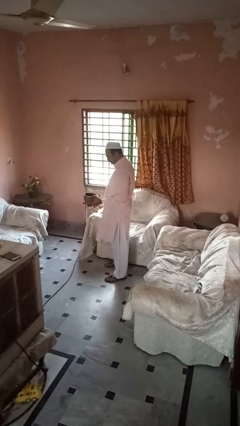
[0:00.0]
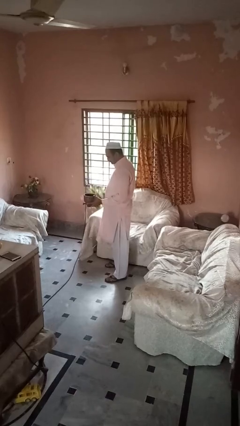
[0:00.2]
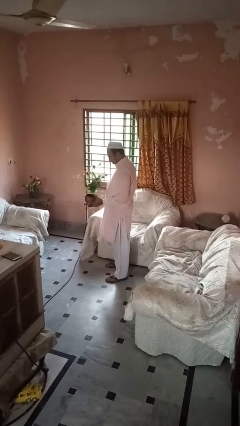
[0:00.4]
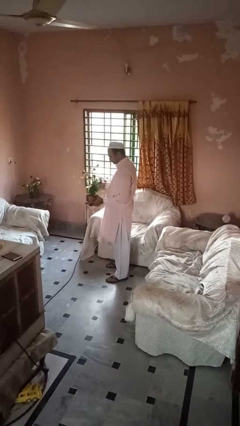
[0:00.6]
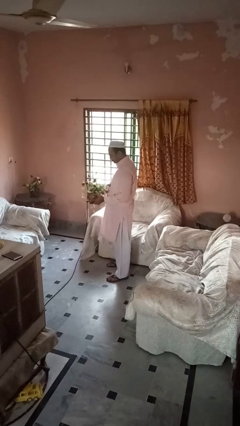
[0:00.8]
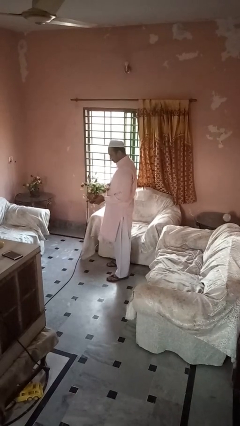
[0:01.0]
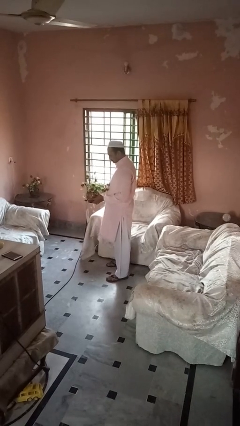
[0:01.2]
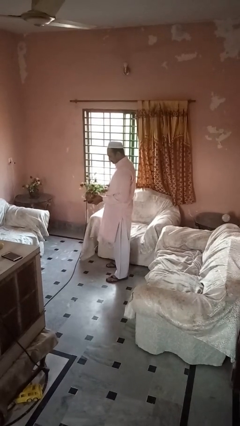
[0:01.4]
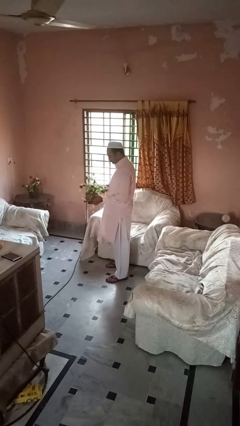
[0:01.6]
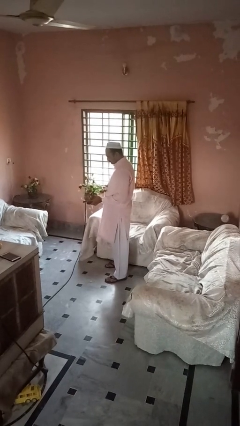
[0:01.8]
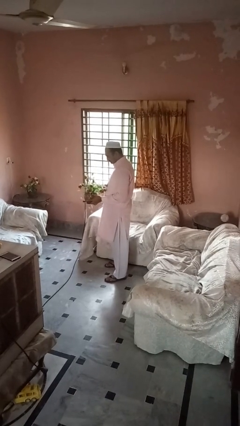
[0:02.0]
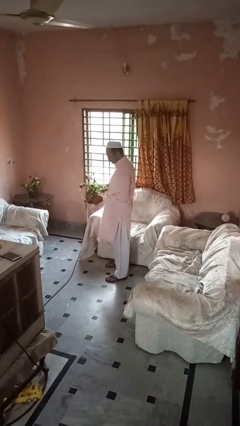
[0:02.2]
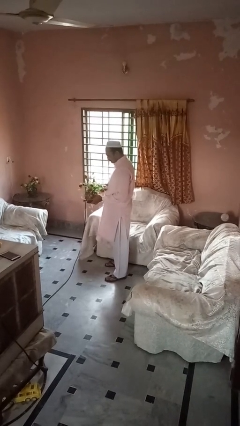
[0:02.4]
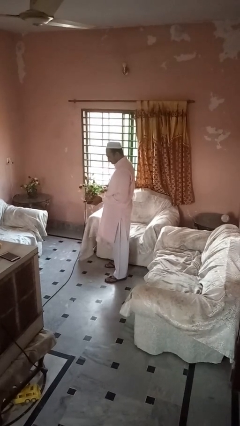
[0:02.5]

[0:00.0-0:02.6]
person arranges flowers in vase

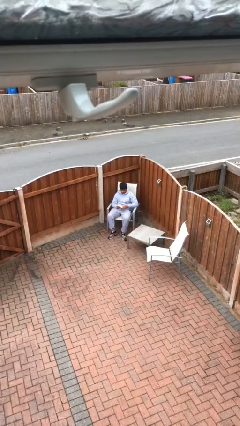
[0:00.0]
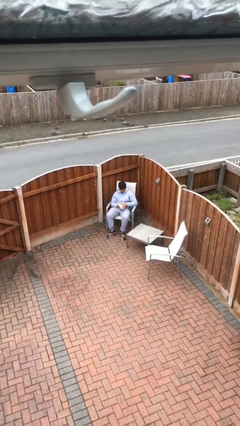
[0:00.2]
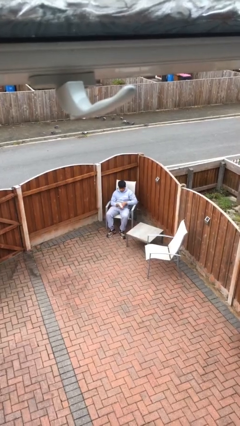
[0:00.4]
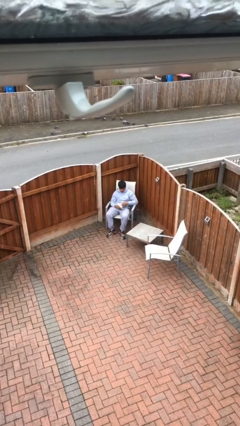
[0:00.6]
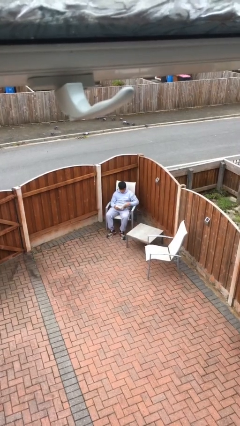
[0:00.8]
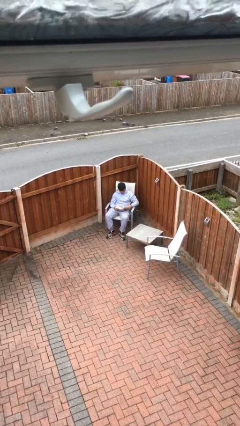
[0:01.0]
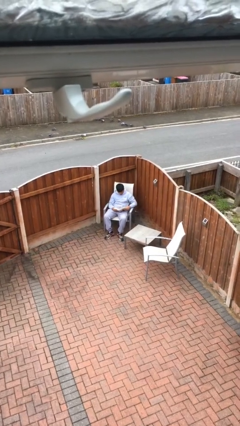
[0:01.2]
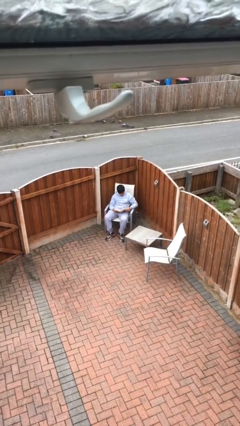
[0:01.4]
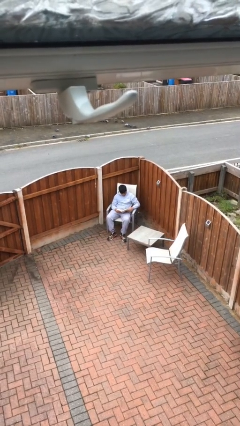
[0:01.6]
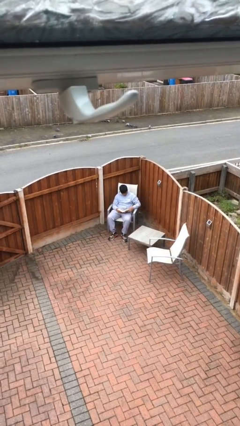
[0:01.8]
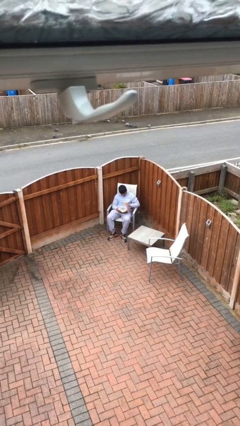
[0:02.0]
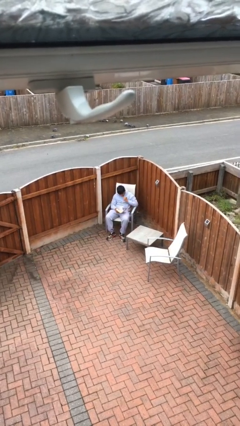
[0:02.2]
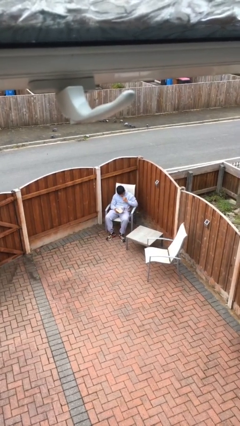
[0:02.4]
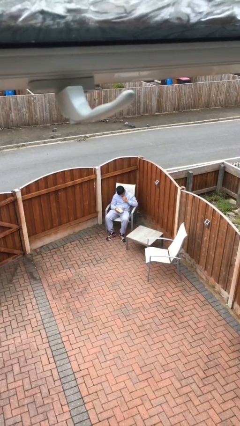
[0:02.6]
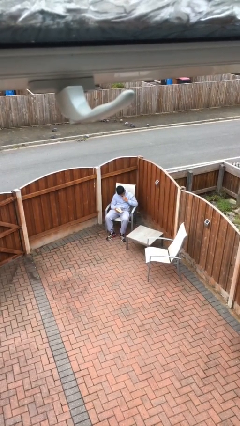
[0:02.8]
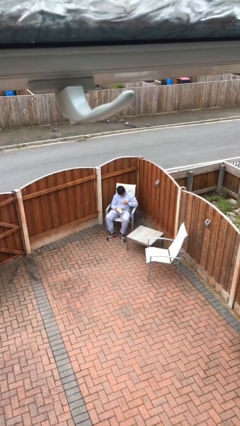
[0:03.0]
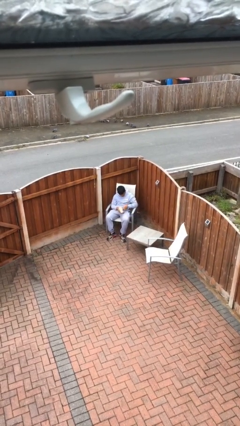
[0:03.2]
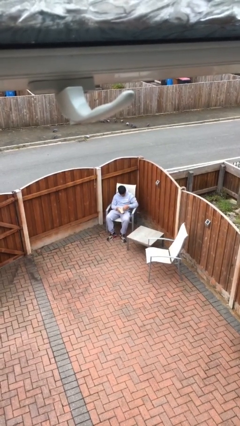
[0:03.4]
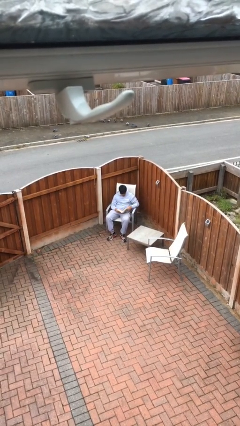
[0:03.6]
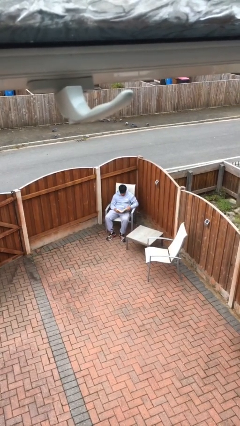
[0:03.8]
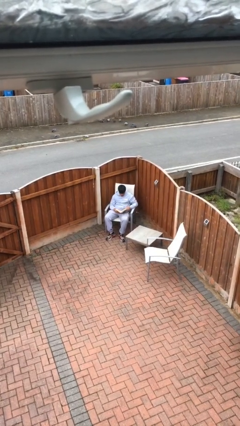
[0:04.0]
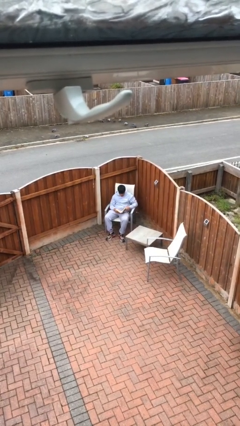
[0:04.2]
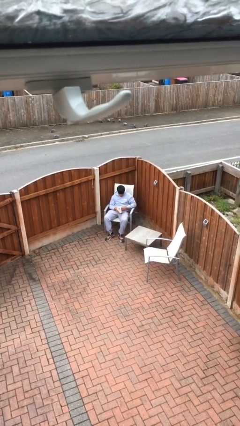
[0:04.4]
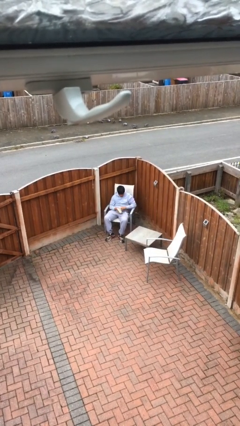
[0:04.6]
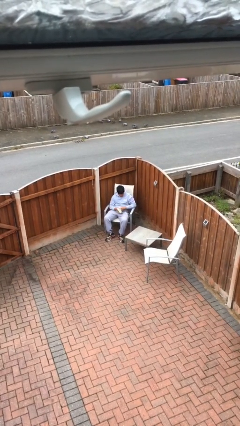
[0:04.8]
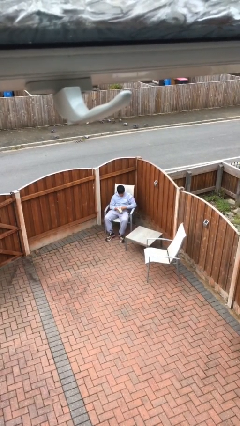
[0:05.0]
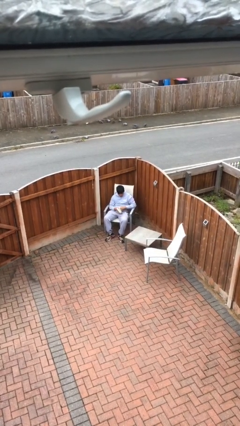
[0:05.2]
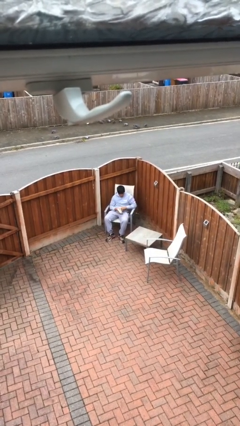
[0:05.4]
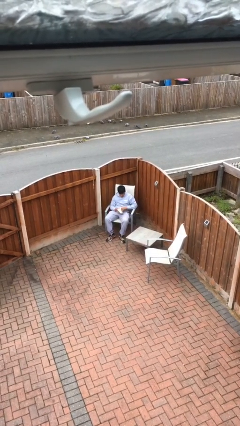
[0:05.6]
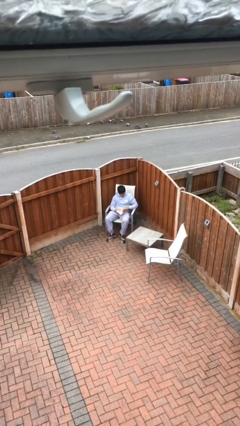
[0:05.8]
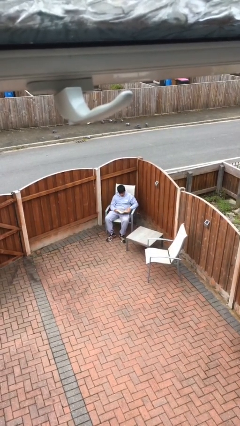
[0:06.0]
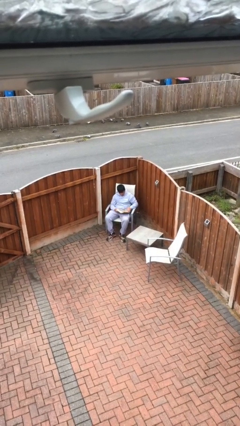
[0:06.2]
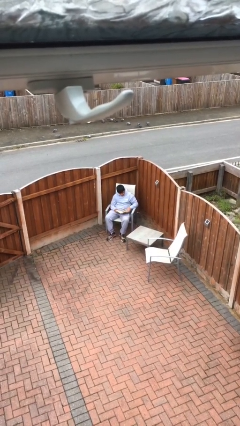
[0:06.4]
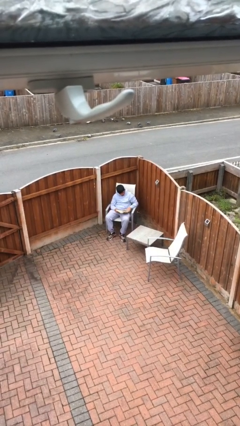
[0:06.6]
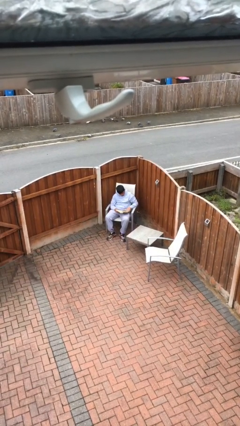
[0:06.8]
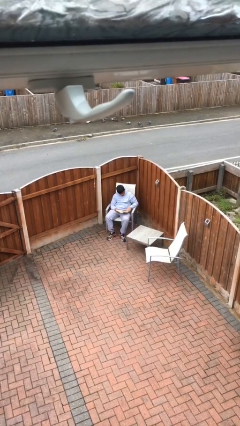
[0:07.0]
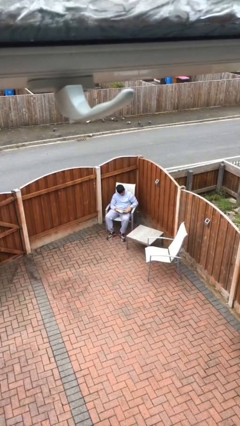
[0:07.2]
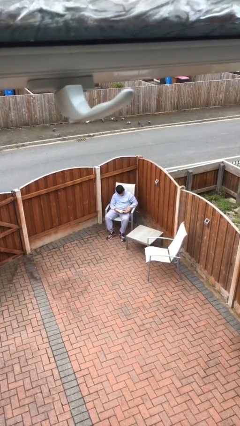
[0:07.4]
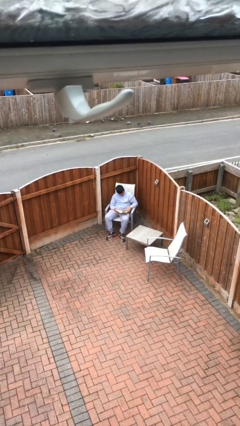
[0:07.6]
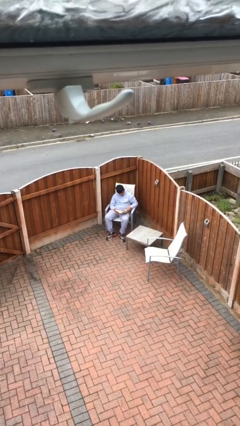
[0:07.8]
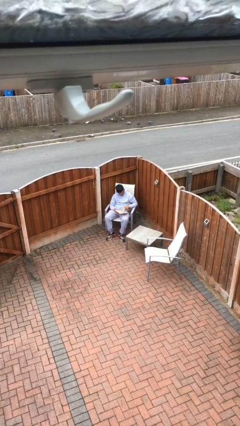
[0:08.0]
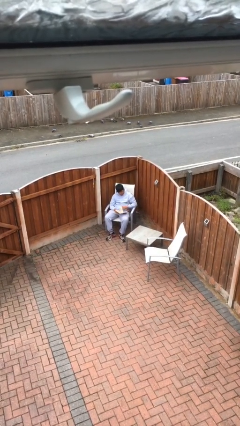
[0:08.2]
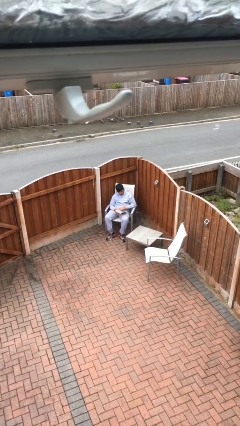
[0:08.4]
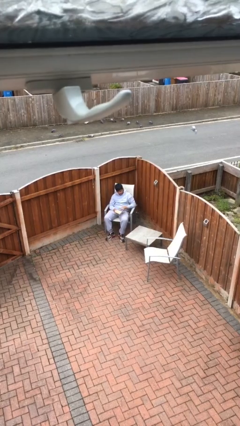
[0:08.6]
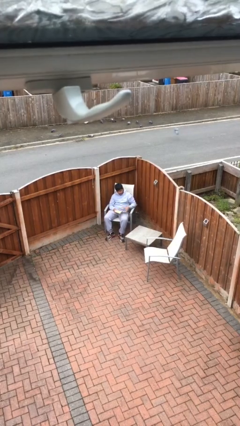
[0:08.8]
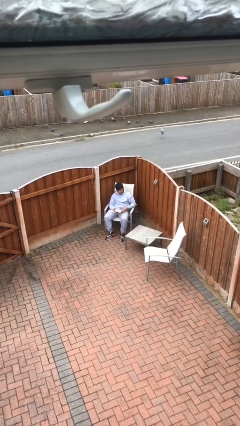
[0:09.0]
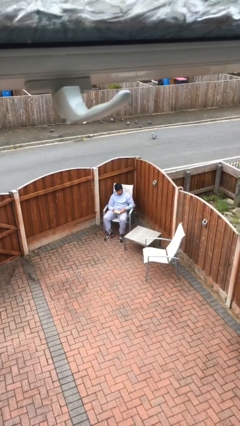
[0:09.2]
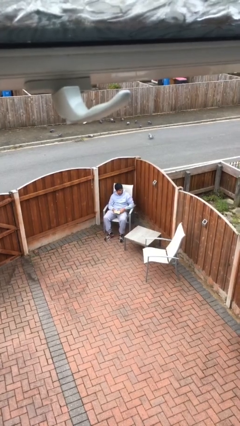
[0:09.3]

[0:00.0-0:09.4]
person reads document

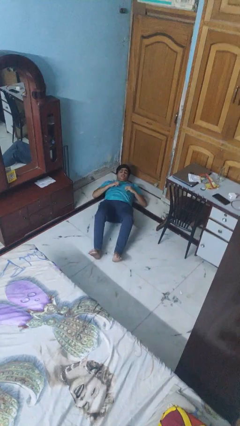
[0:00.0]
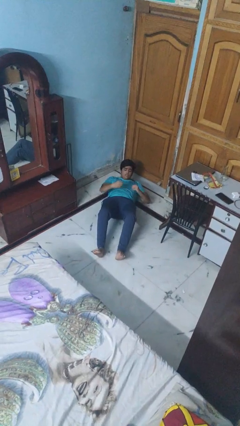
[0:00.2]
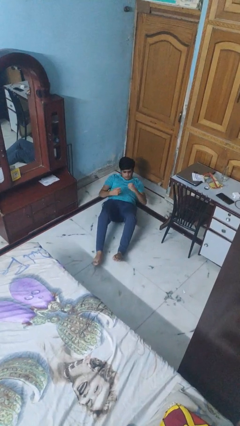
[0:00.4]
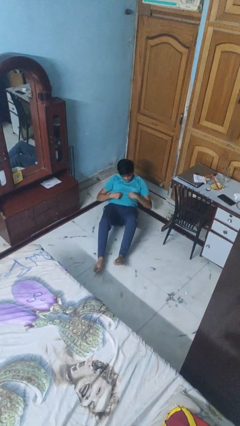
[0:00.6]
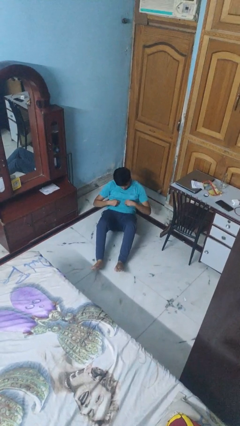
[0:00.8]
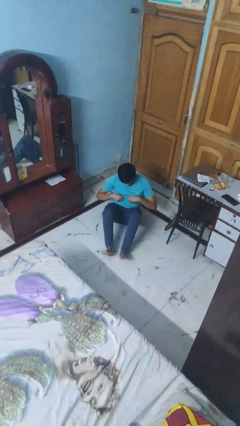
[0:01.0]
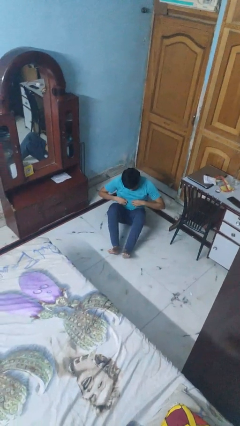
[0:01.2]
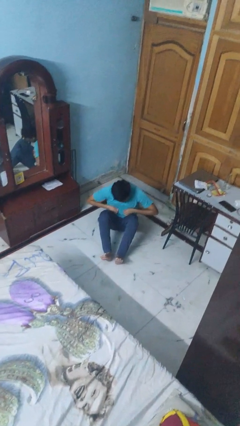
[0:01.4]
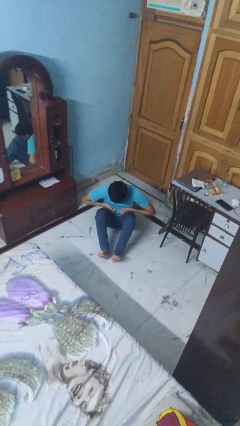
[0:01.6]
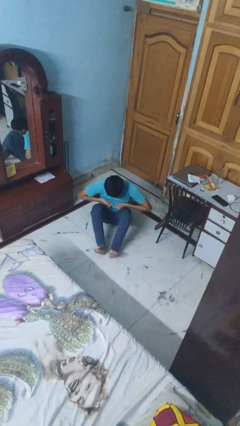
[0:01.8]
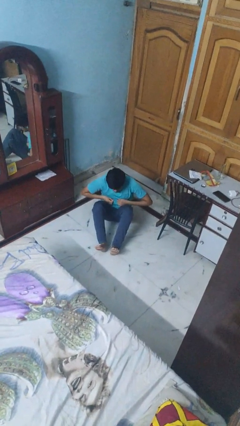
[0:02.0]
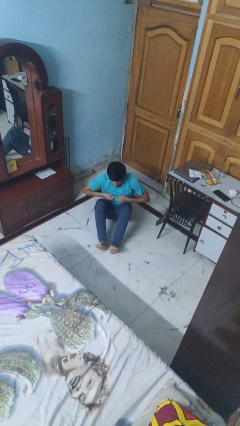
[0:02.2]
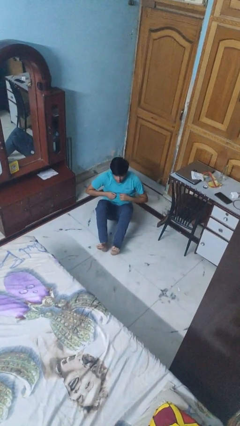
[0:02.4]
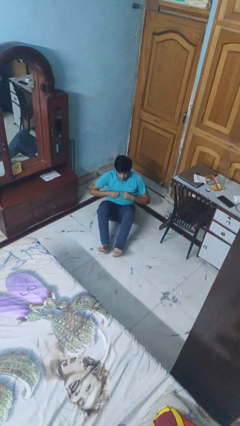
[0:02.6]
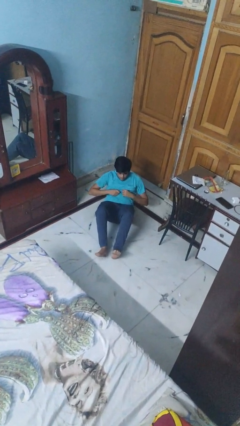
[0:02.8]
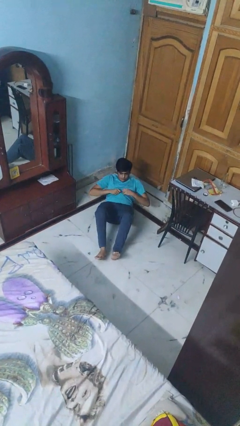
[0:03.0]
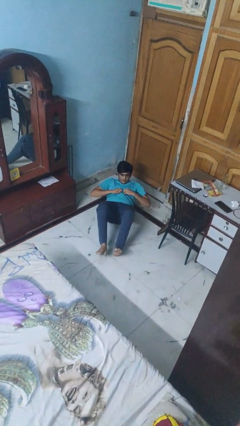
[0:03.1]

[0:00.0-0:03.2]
person exercises with situp

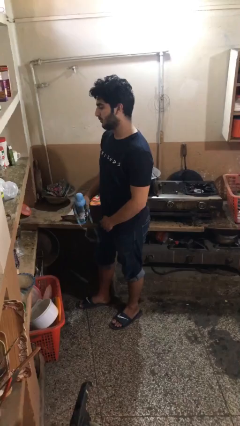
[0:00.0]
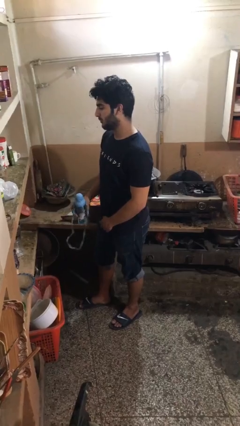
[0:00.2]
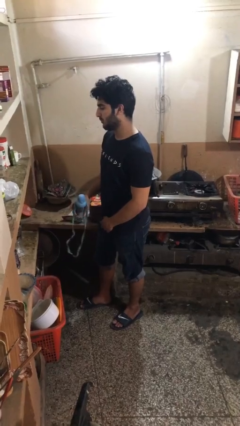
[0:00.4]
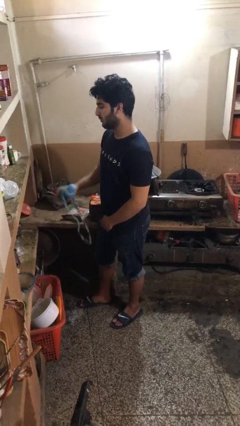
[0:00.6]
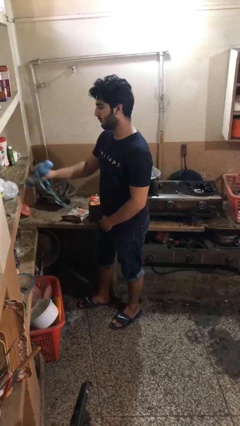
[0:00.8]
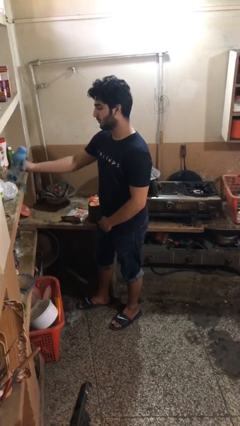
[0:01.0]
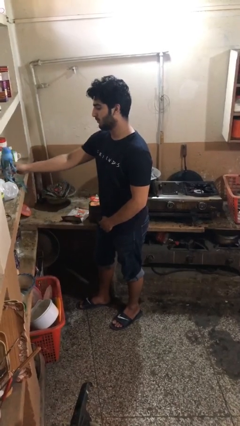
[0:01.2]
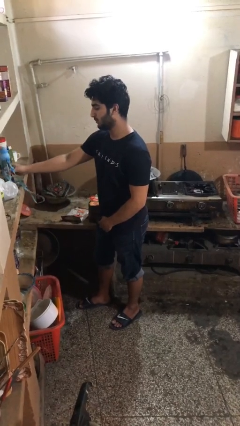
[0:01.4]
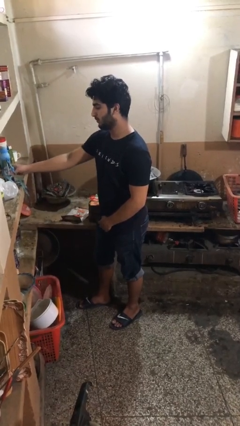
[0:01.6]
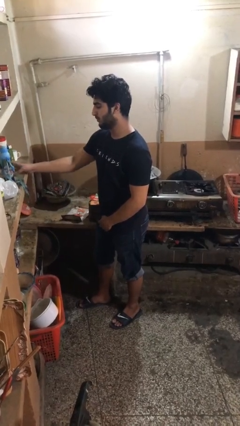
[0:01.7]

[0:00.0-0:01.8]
person puts down object on countertop

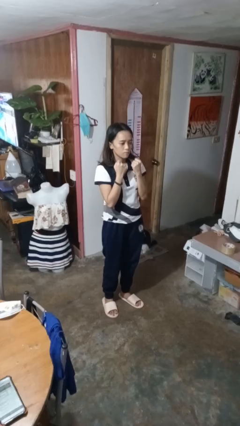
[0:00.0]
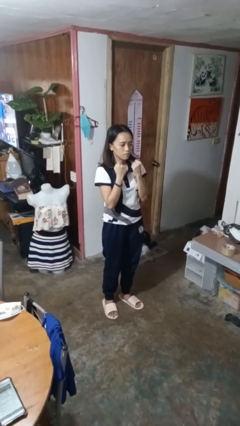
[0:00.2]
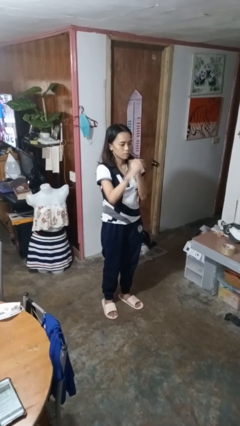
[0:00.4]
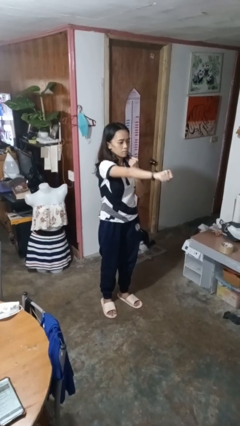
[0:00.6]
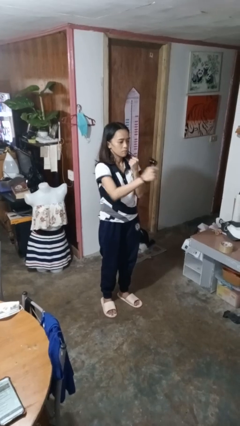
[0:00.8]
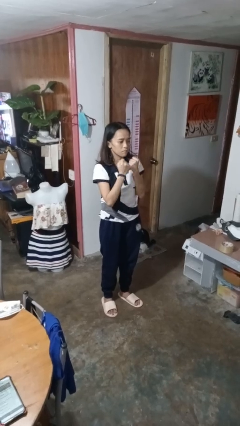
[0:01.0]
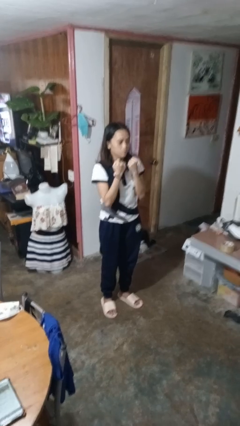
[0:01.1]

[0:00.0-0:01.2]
person punches
